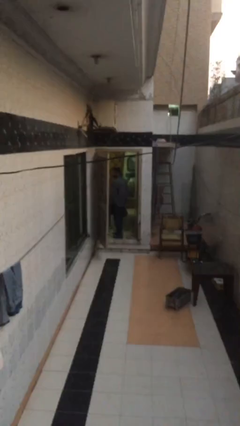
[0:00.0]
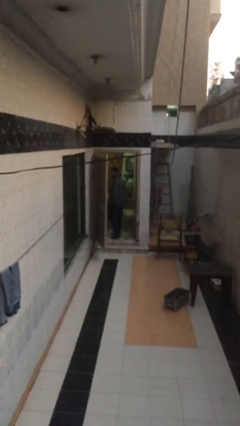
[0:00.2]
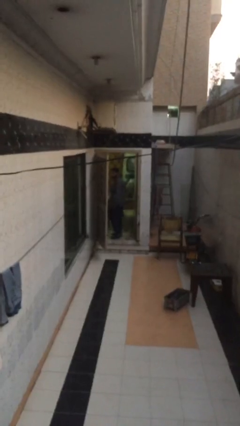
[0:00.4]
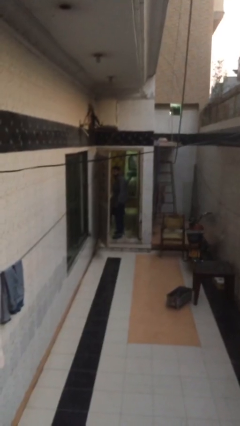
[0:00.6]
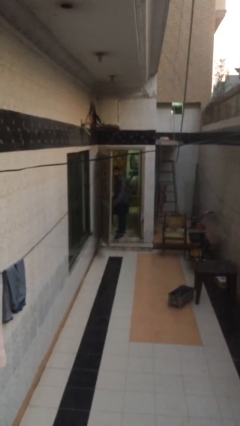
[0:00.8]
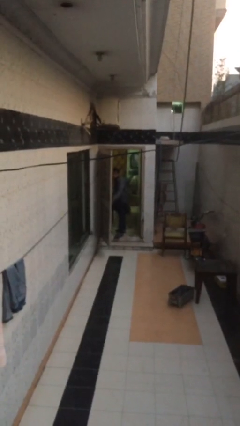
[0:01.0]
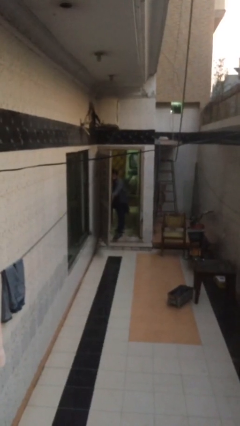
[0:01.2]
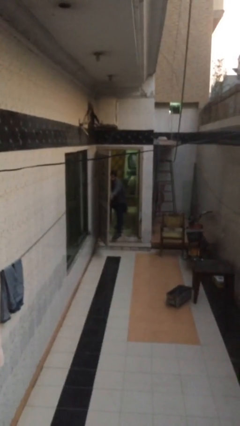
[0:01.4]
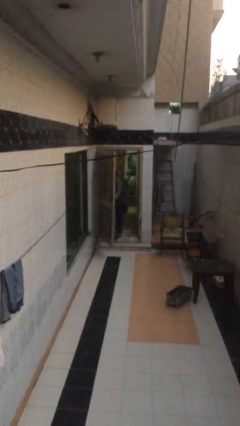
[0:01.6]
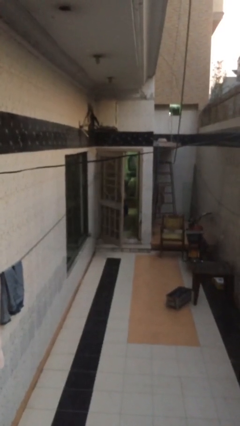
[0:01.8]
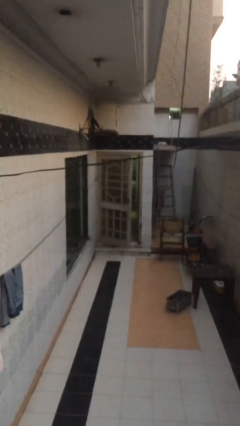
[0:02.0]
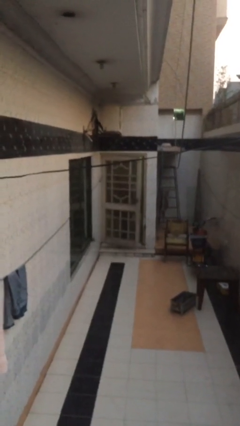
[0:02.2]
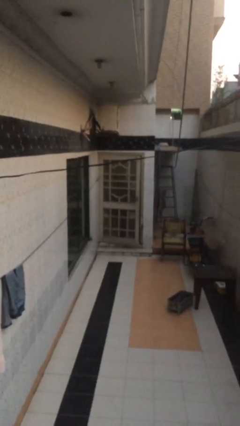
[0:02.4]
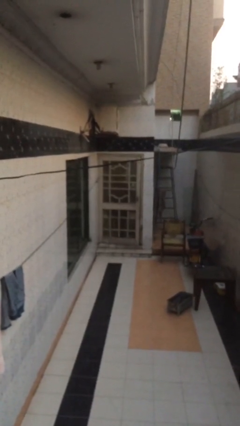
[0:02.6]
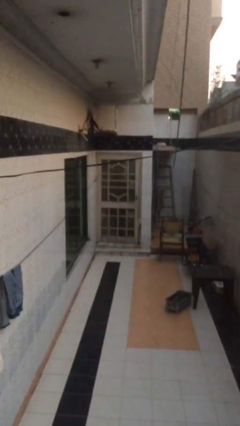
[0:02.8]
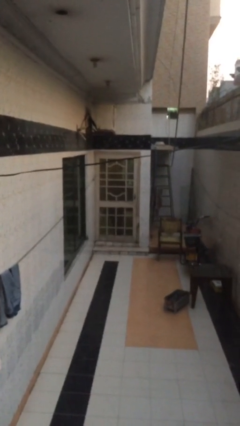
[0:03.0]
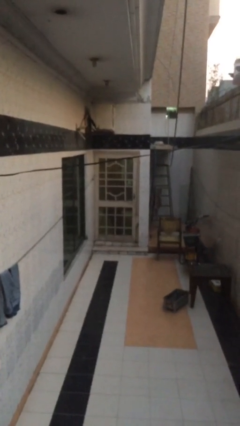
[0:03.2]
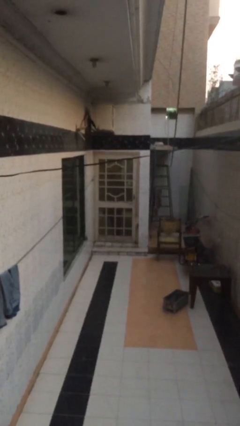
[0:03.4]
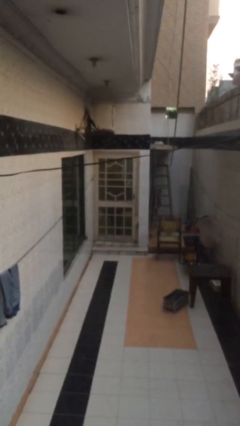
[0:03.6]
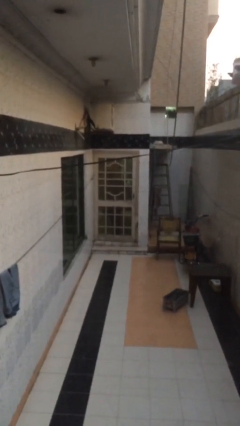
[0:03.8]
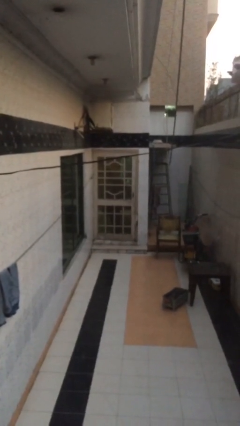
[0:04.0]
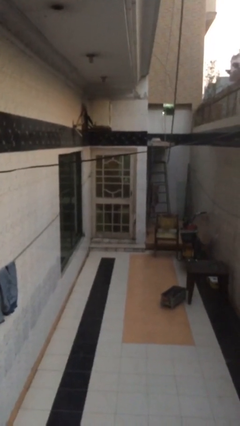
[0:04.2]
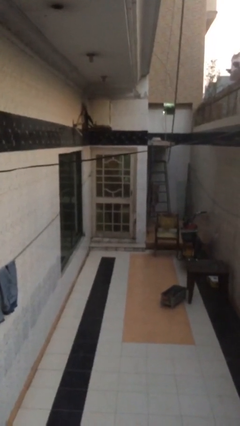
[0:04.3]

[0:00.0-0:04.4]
person closes facility door

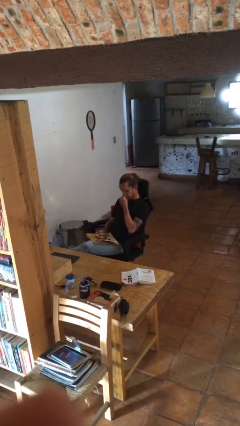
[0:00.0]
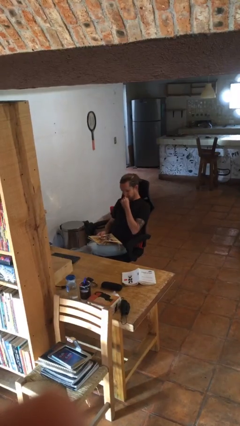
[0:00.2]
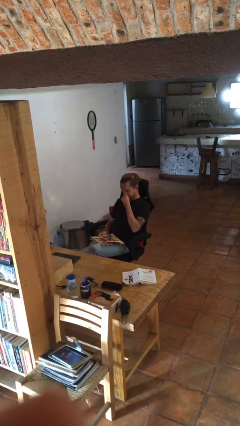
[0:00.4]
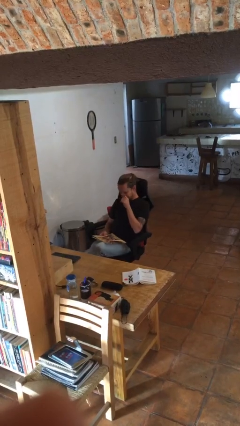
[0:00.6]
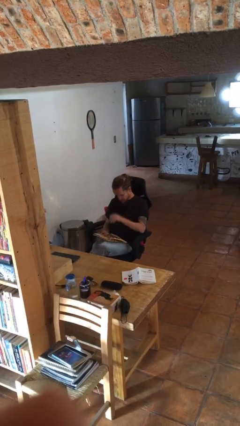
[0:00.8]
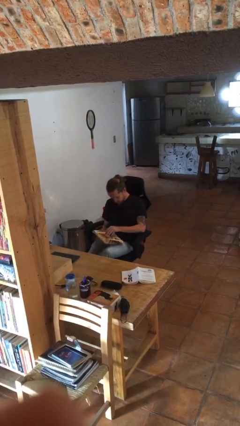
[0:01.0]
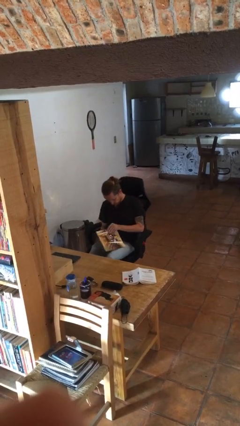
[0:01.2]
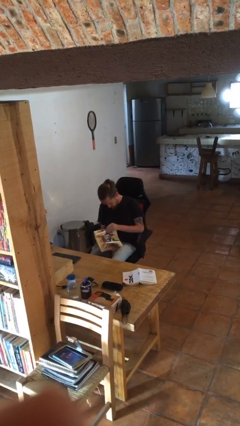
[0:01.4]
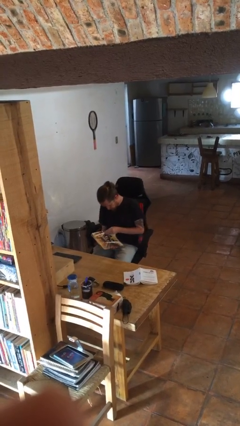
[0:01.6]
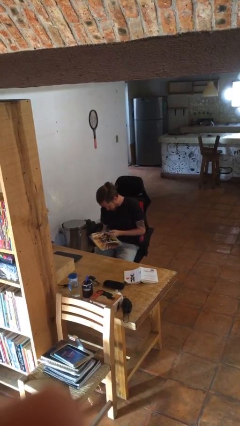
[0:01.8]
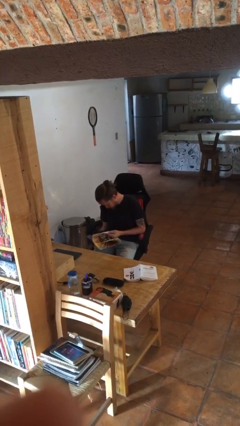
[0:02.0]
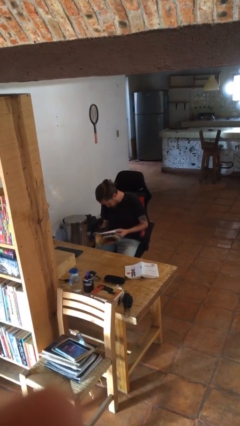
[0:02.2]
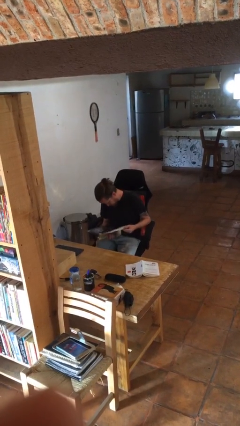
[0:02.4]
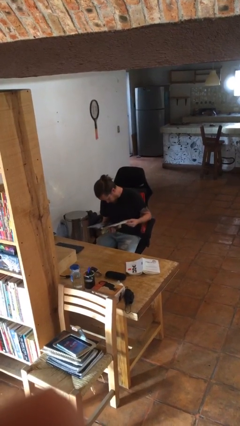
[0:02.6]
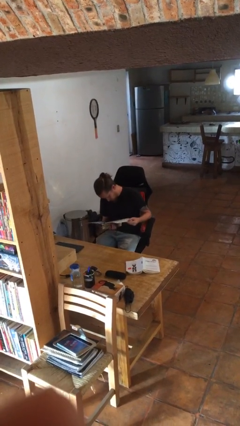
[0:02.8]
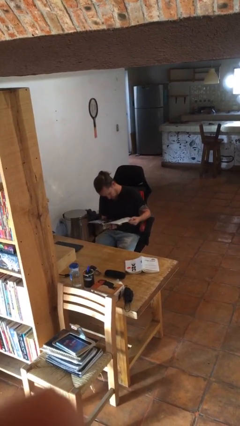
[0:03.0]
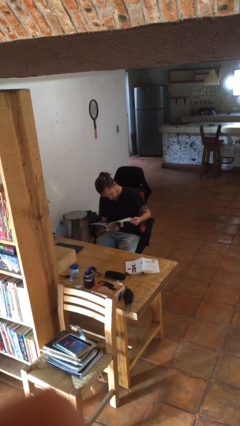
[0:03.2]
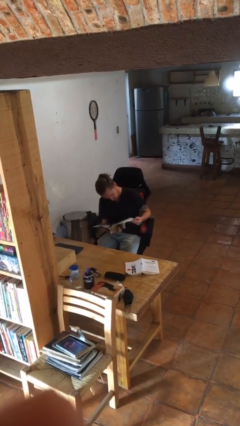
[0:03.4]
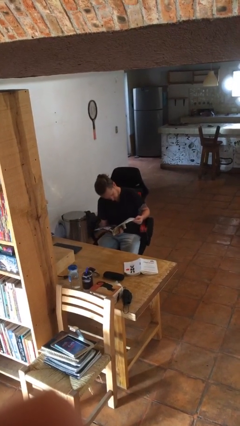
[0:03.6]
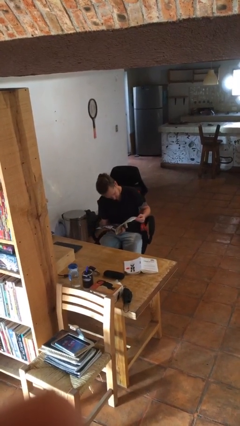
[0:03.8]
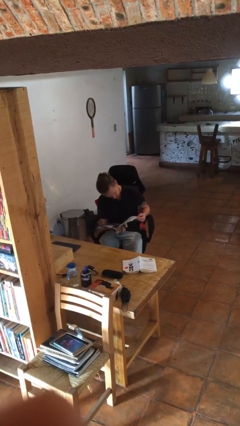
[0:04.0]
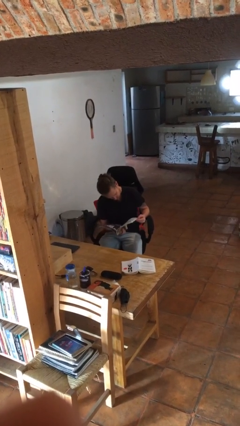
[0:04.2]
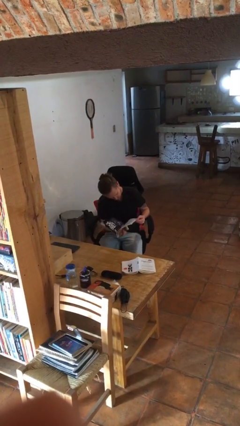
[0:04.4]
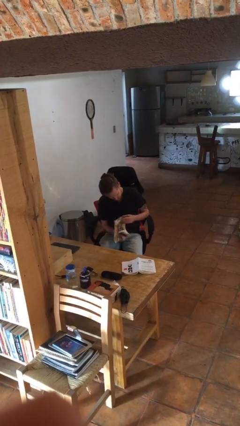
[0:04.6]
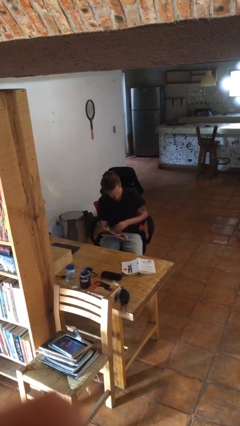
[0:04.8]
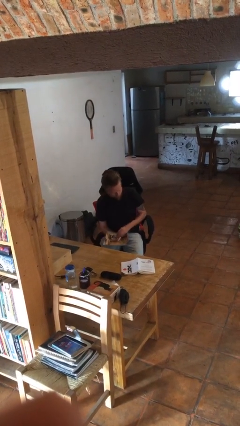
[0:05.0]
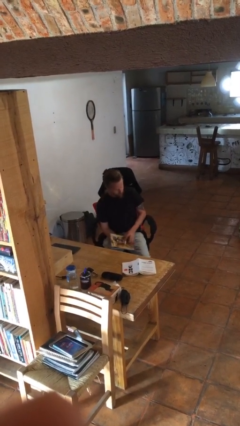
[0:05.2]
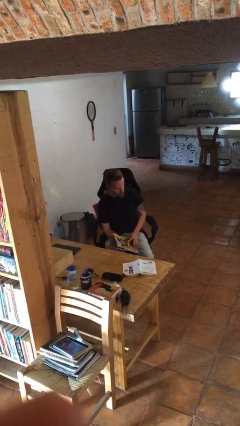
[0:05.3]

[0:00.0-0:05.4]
person reads magazine

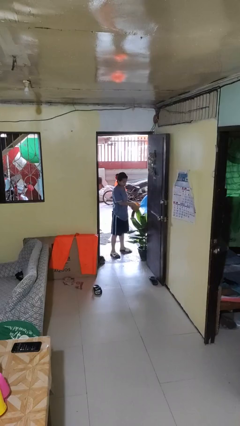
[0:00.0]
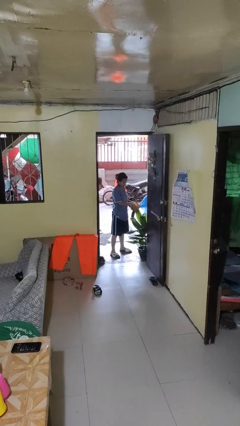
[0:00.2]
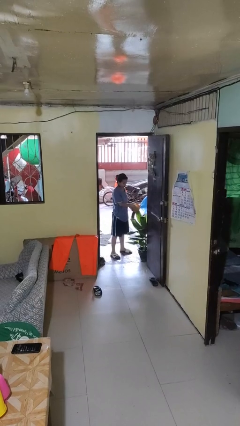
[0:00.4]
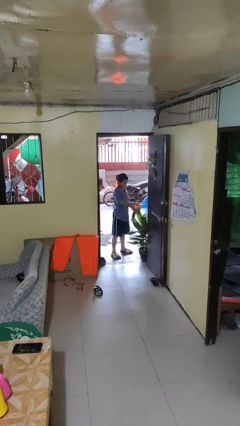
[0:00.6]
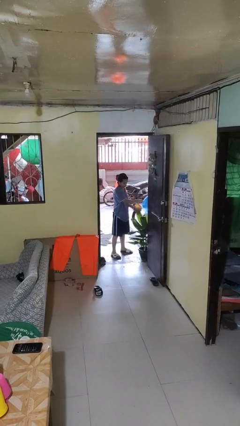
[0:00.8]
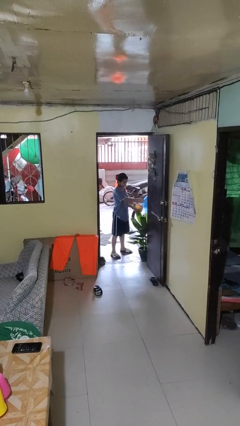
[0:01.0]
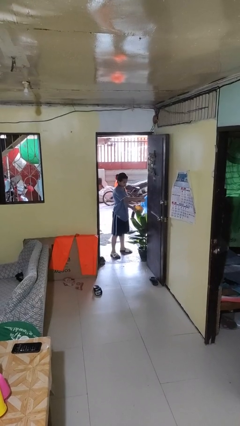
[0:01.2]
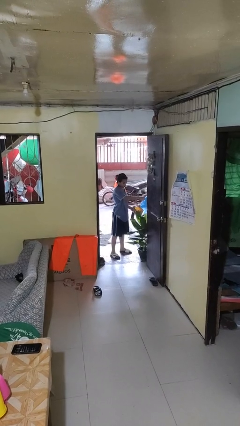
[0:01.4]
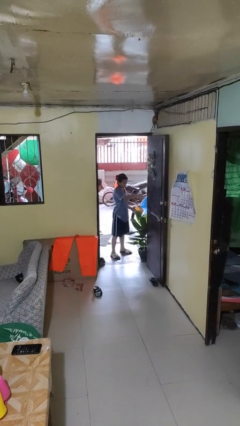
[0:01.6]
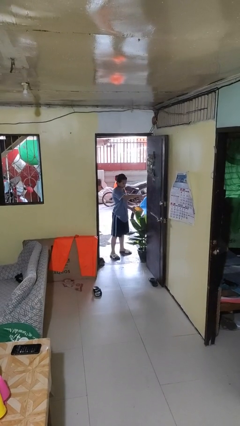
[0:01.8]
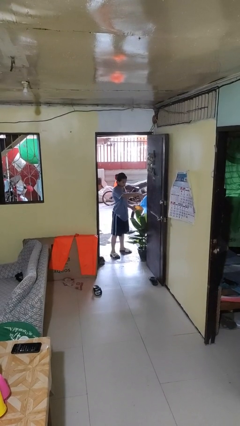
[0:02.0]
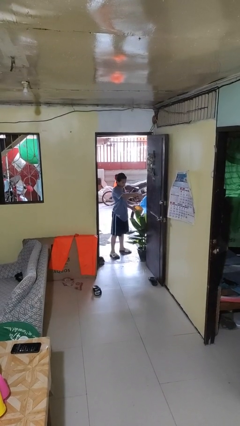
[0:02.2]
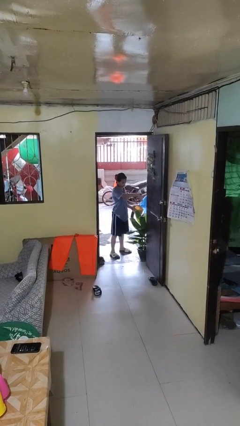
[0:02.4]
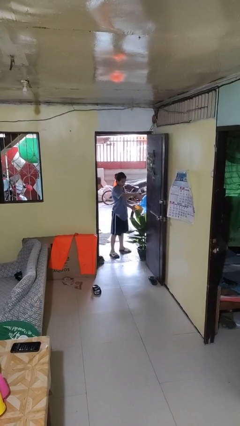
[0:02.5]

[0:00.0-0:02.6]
person waters houseplant

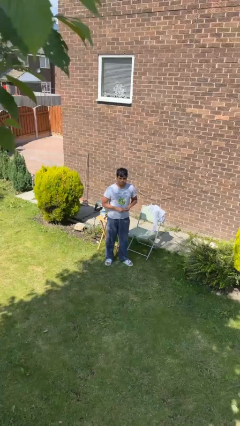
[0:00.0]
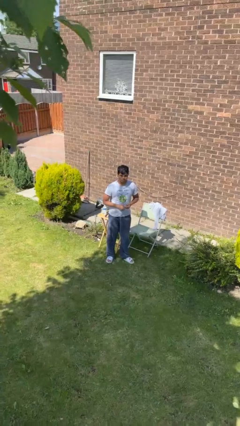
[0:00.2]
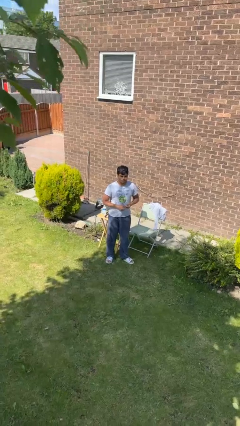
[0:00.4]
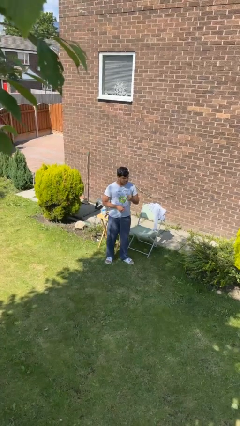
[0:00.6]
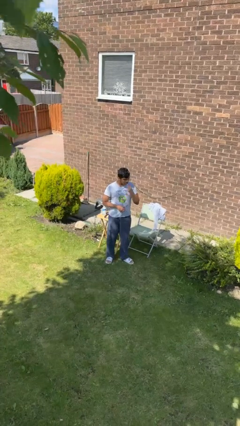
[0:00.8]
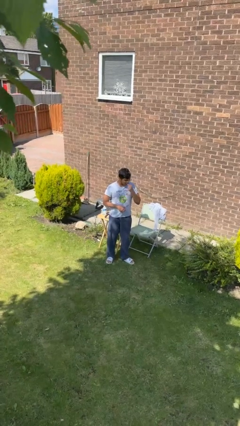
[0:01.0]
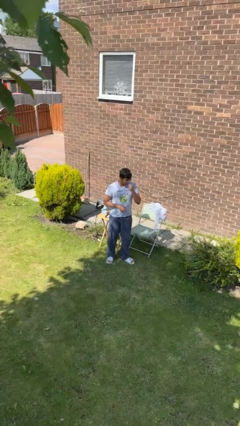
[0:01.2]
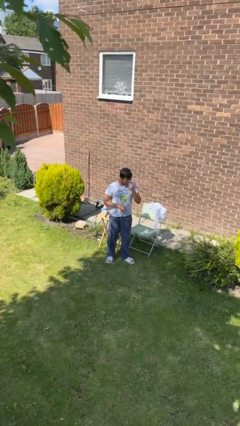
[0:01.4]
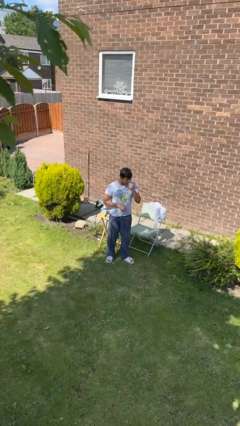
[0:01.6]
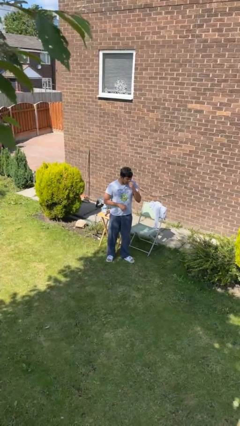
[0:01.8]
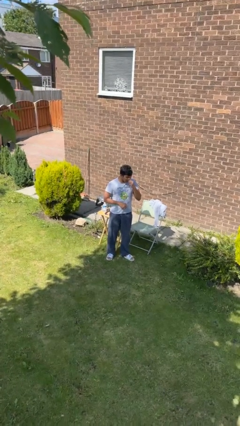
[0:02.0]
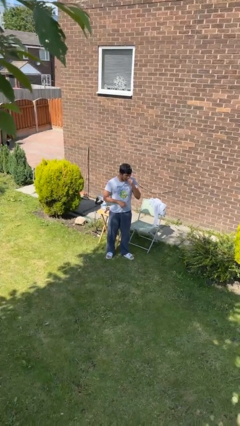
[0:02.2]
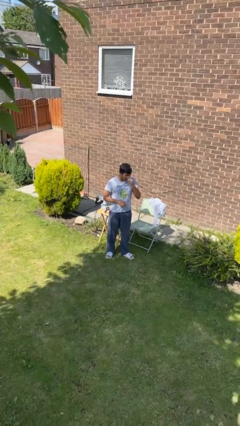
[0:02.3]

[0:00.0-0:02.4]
person flosses

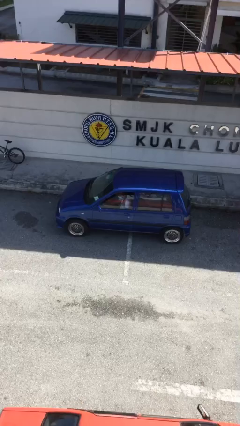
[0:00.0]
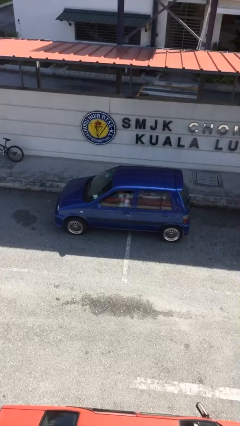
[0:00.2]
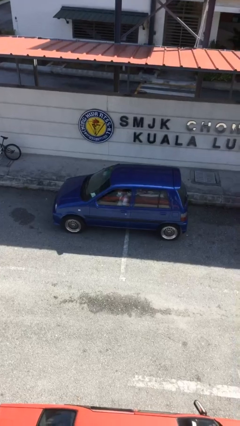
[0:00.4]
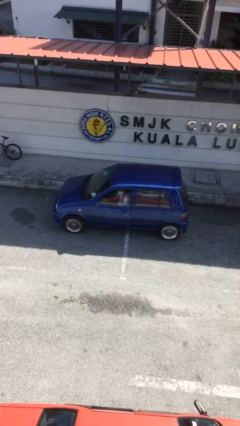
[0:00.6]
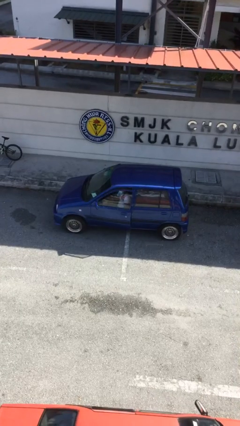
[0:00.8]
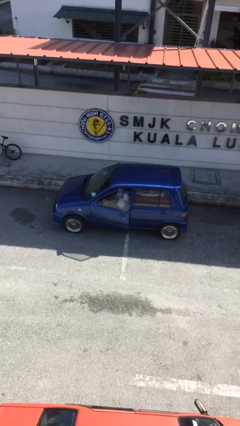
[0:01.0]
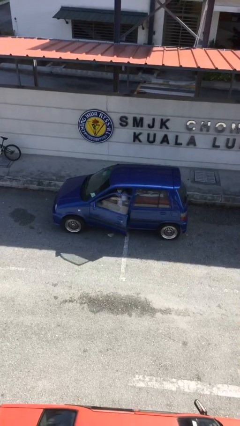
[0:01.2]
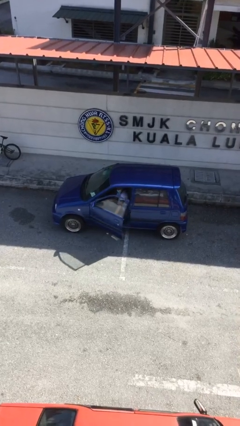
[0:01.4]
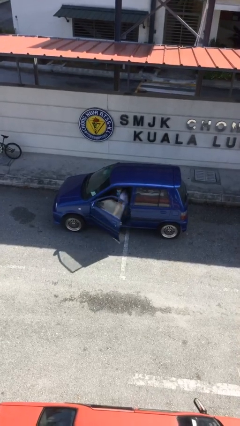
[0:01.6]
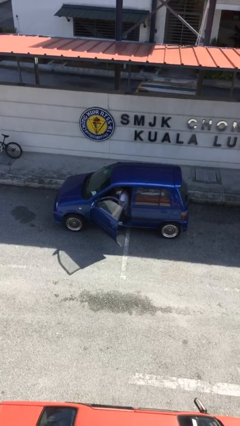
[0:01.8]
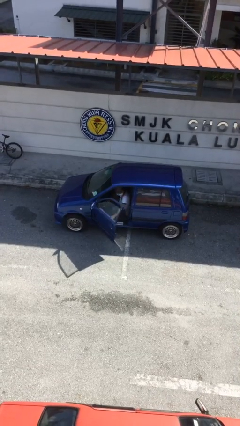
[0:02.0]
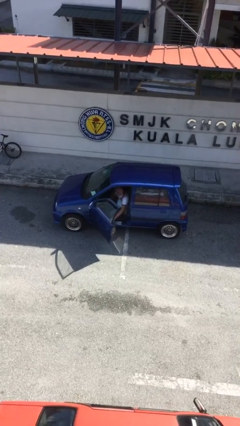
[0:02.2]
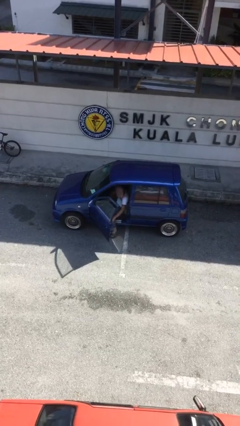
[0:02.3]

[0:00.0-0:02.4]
person opens car door

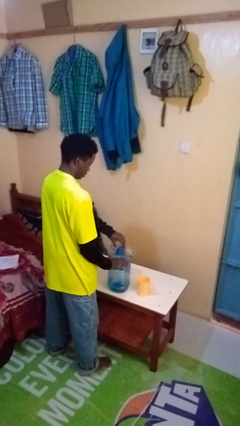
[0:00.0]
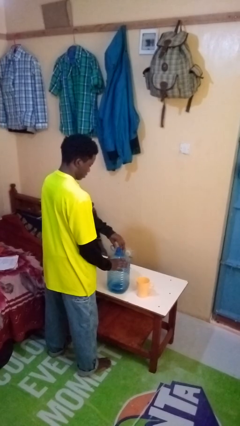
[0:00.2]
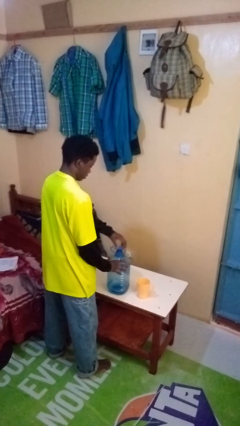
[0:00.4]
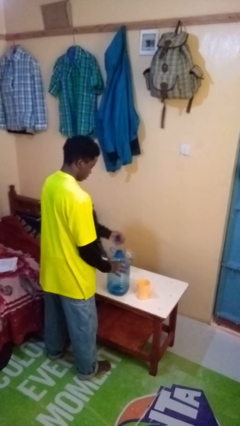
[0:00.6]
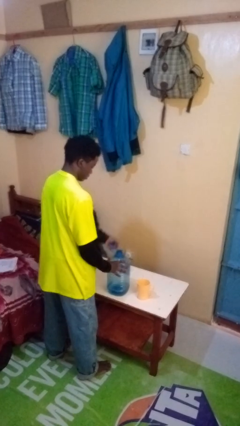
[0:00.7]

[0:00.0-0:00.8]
person unscrews lid from bottle
